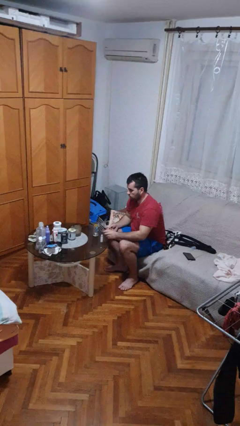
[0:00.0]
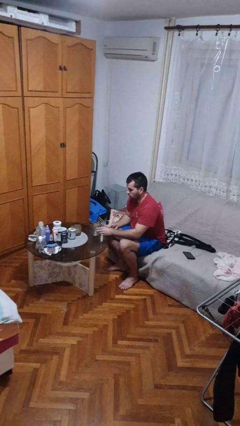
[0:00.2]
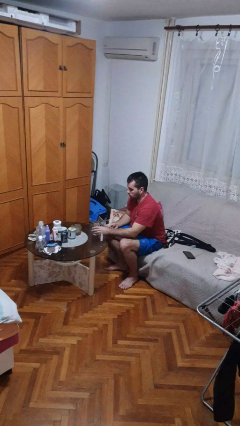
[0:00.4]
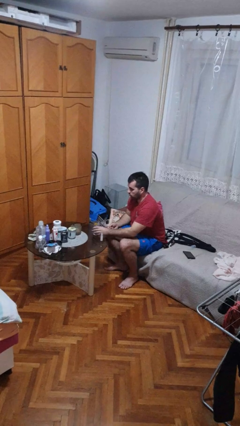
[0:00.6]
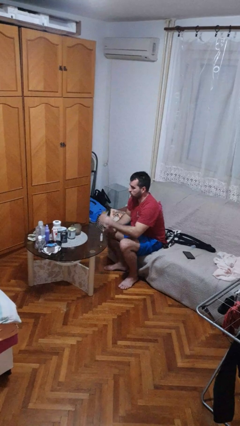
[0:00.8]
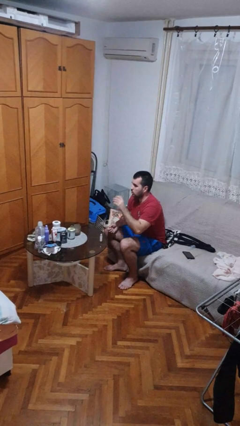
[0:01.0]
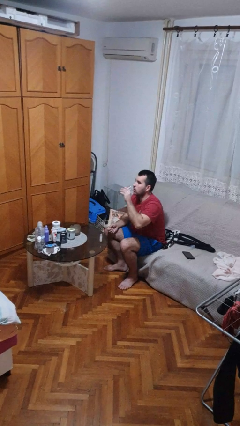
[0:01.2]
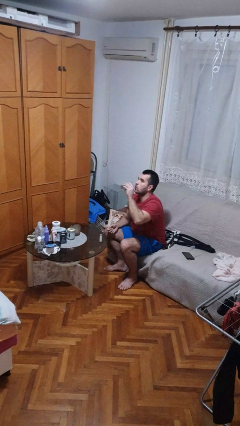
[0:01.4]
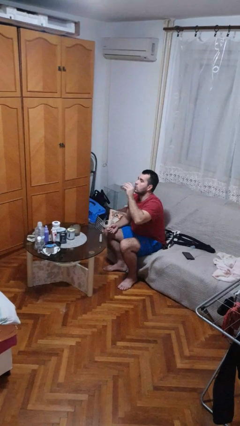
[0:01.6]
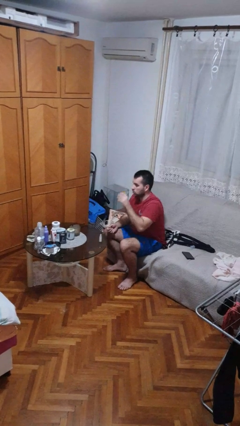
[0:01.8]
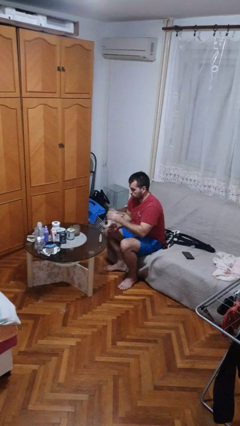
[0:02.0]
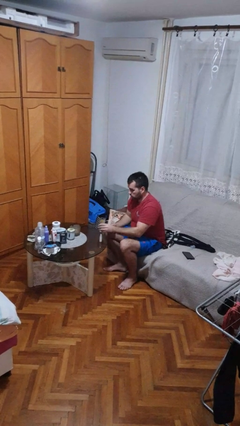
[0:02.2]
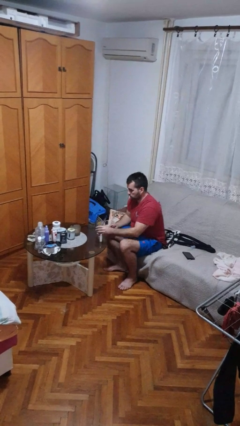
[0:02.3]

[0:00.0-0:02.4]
person drinks from cup

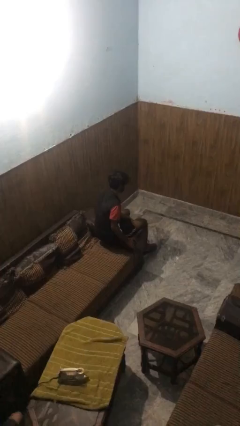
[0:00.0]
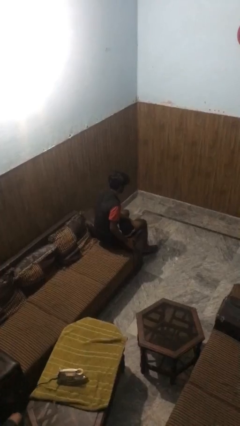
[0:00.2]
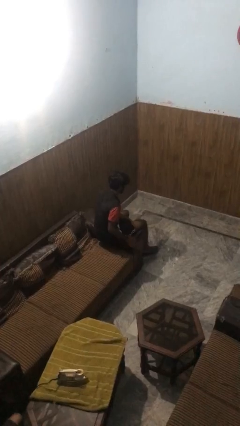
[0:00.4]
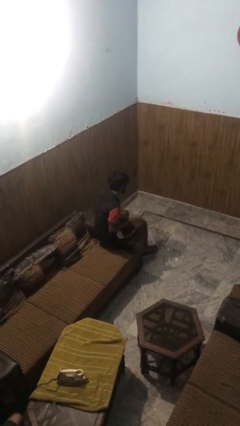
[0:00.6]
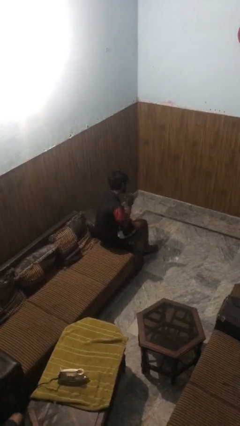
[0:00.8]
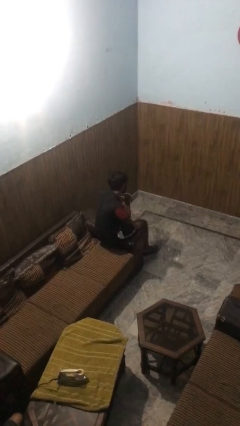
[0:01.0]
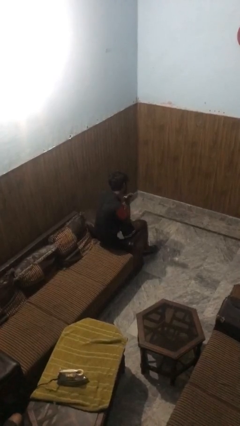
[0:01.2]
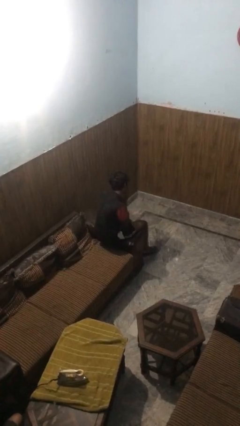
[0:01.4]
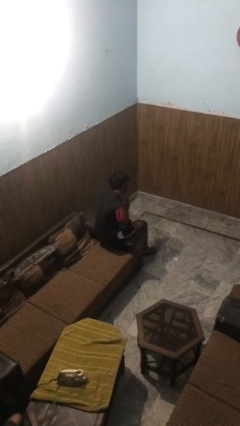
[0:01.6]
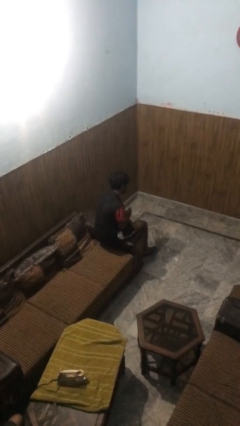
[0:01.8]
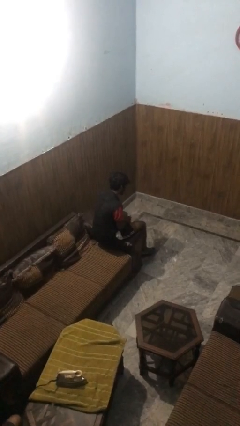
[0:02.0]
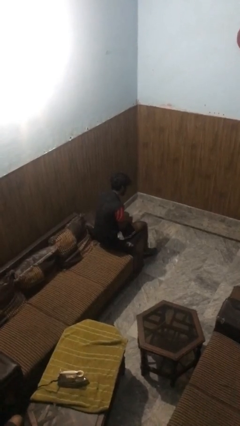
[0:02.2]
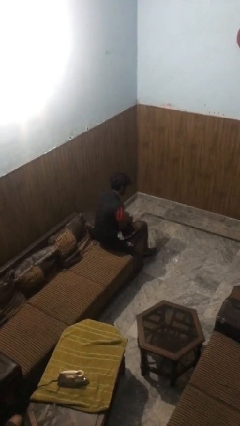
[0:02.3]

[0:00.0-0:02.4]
person swats bug

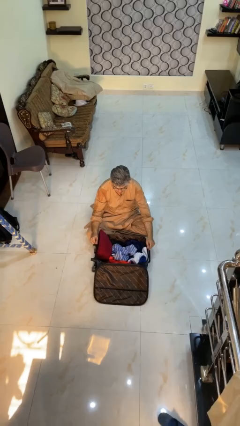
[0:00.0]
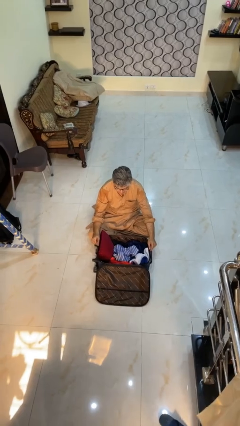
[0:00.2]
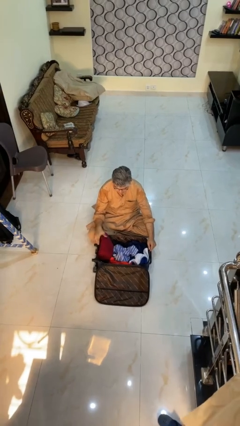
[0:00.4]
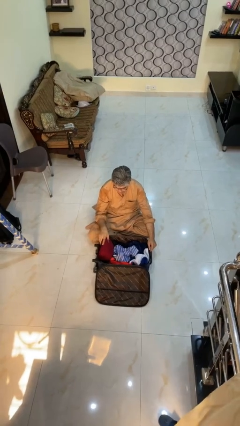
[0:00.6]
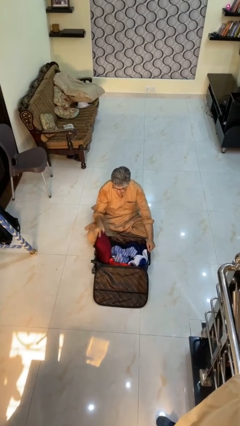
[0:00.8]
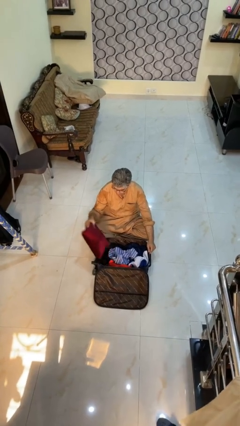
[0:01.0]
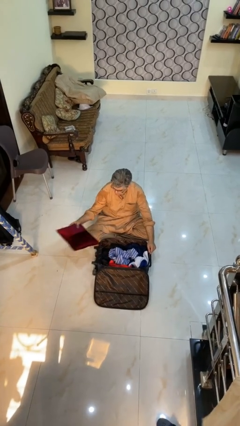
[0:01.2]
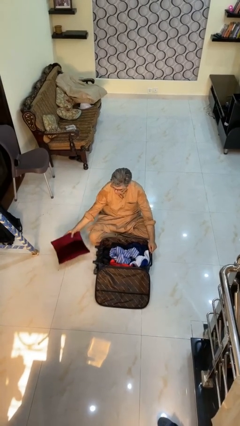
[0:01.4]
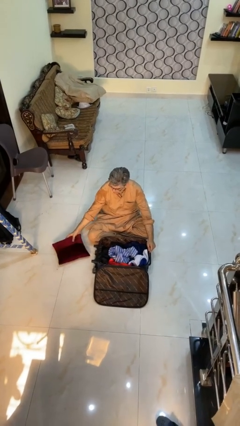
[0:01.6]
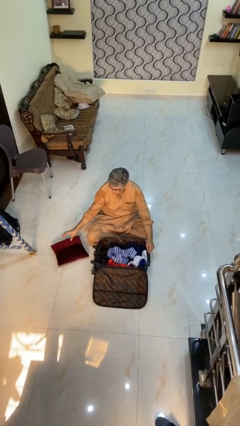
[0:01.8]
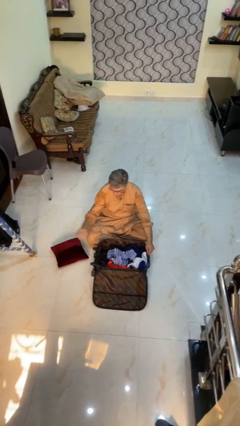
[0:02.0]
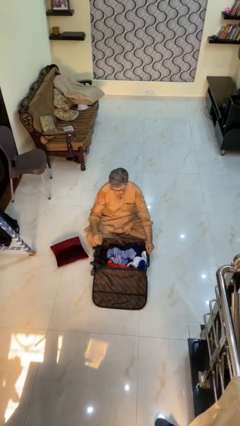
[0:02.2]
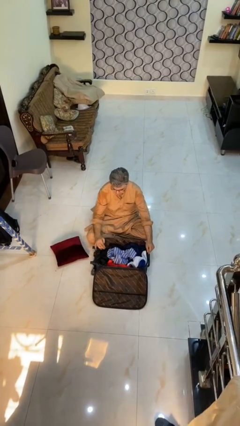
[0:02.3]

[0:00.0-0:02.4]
person unloads clothes from suitcase

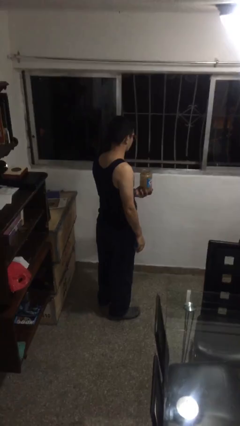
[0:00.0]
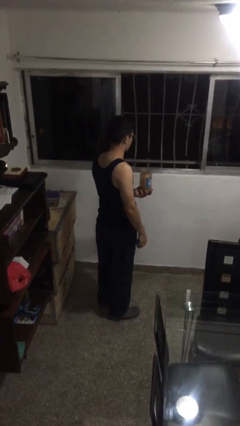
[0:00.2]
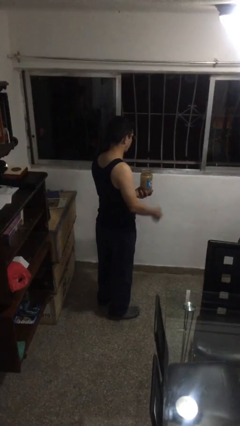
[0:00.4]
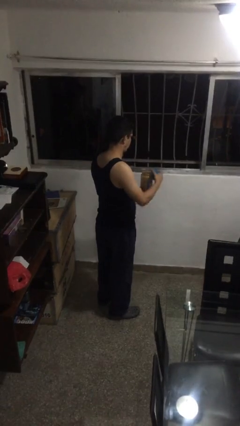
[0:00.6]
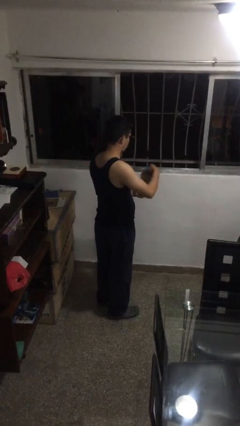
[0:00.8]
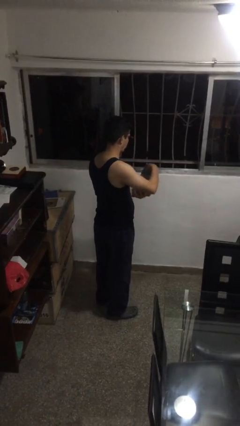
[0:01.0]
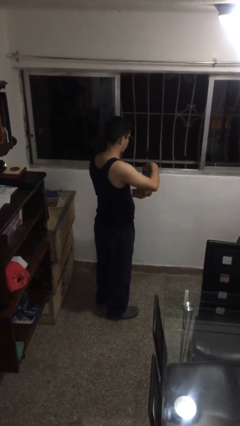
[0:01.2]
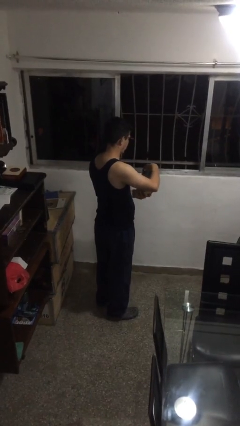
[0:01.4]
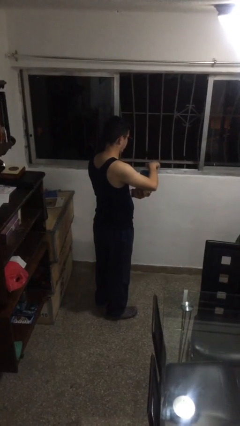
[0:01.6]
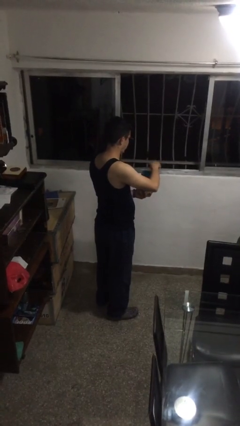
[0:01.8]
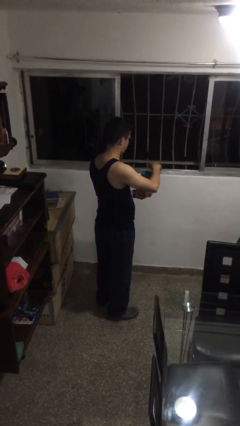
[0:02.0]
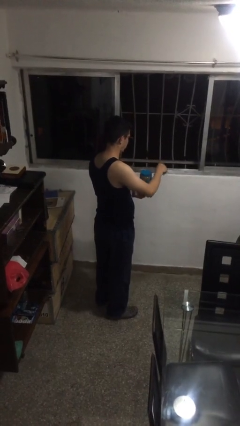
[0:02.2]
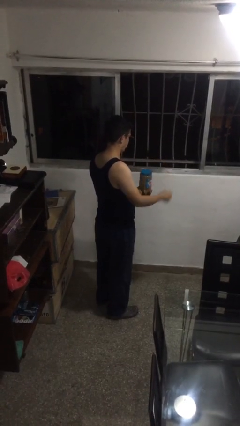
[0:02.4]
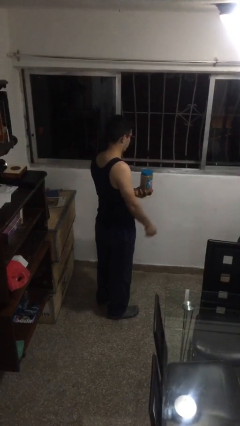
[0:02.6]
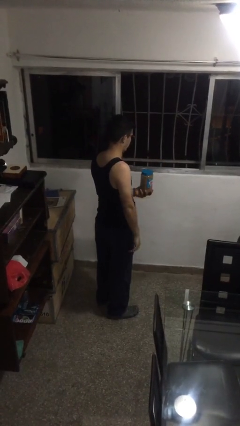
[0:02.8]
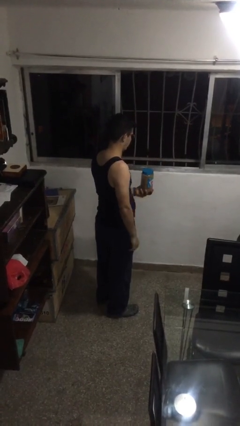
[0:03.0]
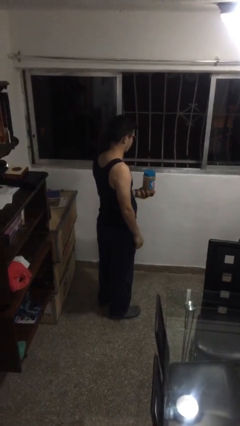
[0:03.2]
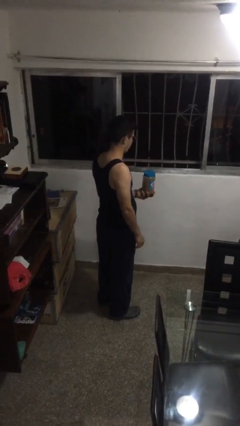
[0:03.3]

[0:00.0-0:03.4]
person closes jar

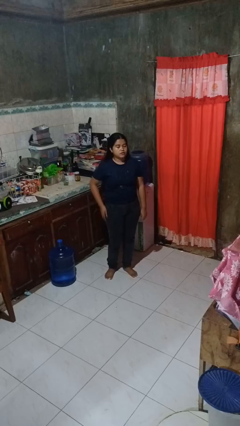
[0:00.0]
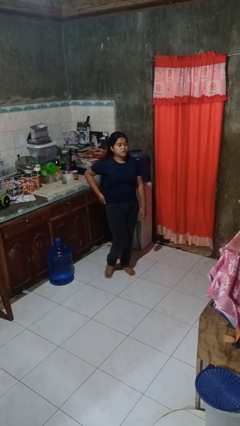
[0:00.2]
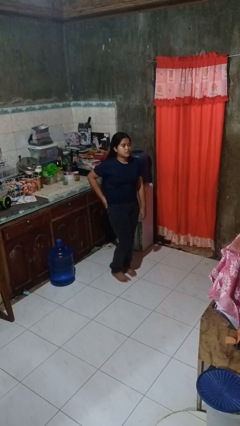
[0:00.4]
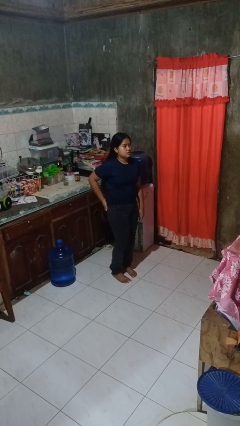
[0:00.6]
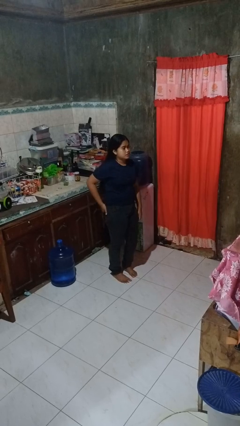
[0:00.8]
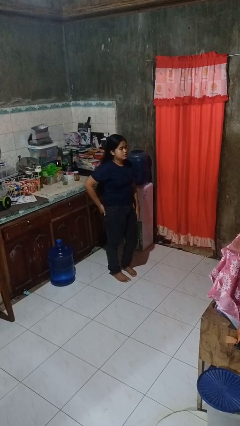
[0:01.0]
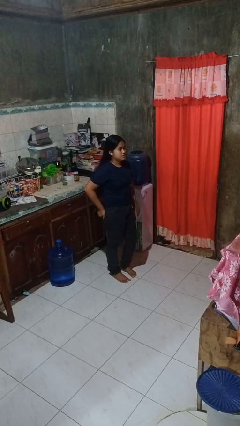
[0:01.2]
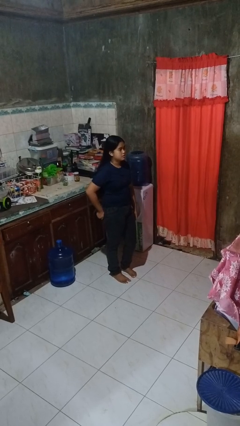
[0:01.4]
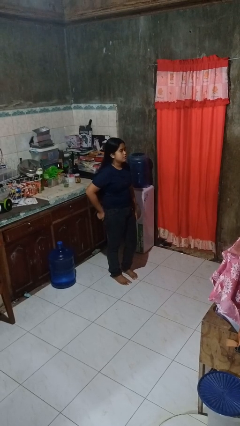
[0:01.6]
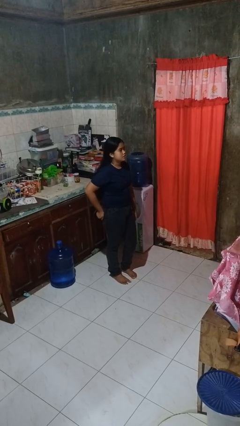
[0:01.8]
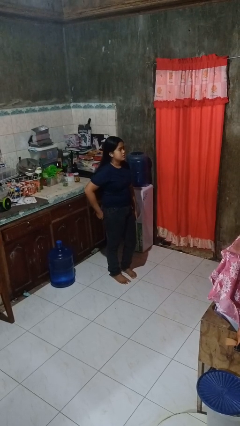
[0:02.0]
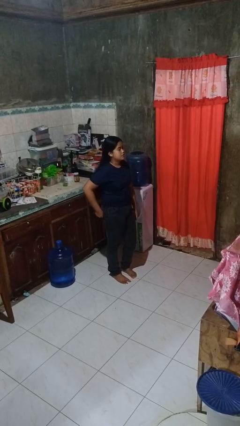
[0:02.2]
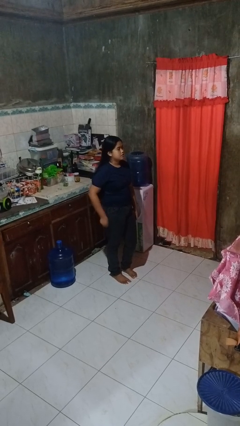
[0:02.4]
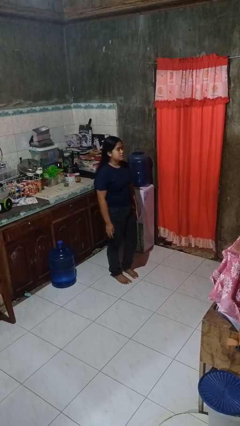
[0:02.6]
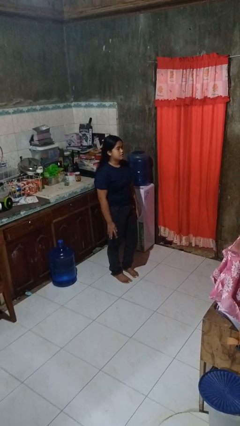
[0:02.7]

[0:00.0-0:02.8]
person puts hands in back pockets

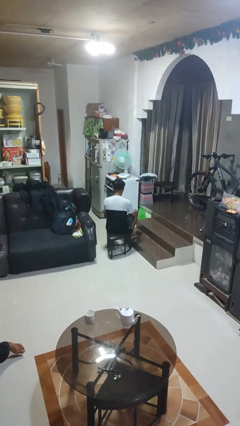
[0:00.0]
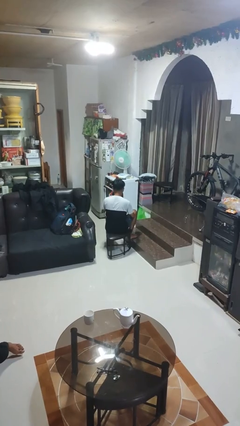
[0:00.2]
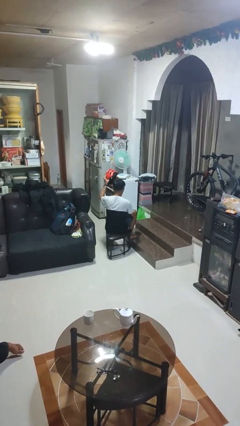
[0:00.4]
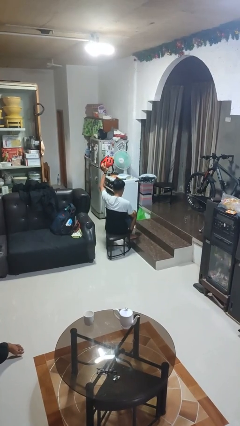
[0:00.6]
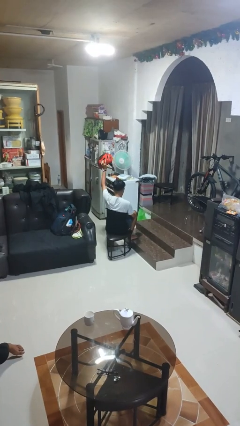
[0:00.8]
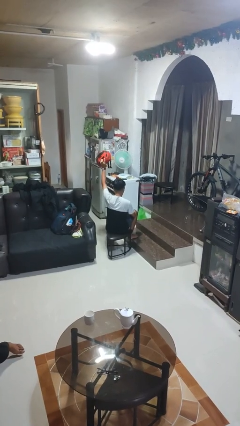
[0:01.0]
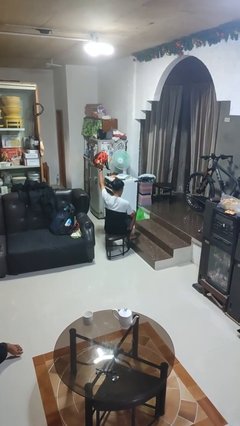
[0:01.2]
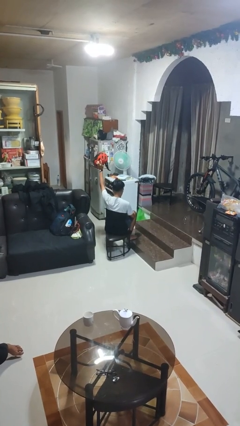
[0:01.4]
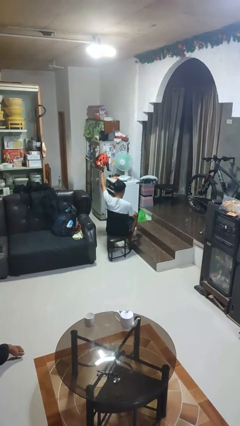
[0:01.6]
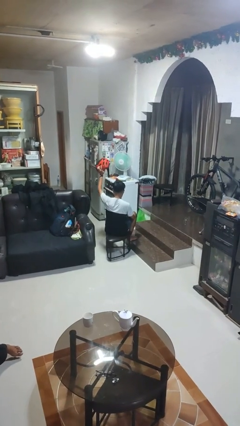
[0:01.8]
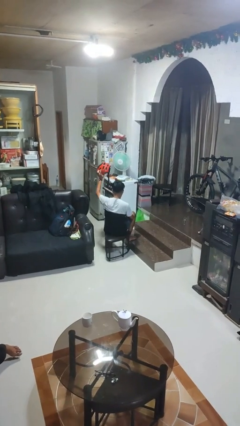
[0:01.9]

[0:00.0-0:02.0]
person holds object above head

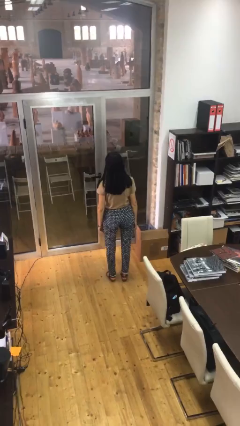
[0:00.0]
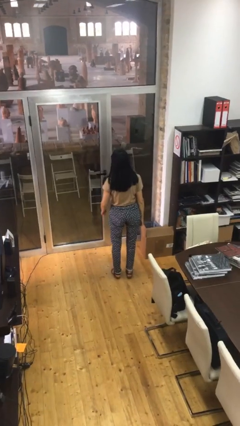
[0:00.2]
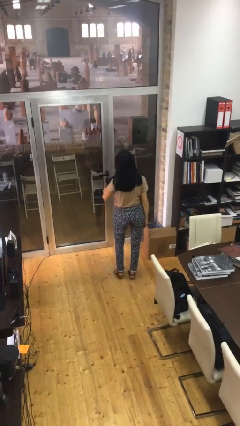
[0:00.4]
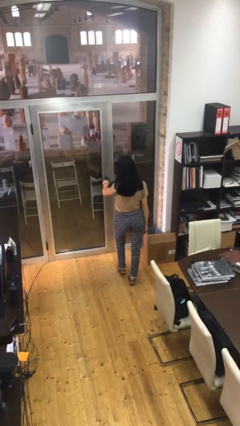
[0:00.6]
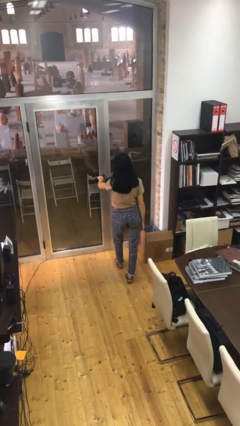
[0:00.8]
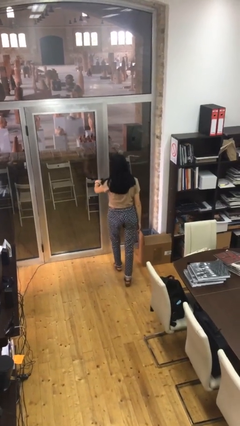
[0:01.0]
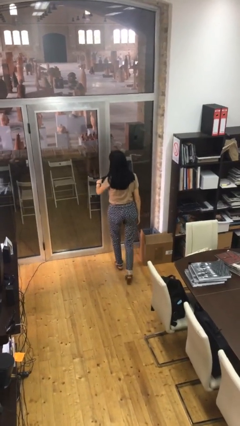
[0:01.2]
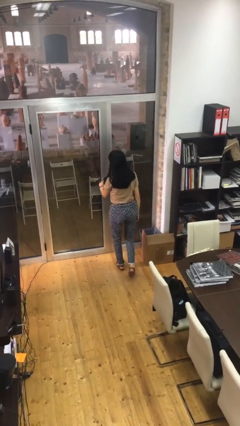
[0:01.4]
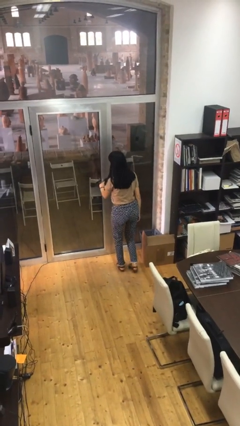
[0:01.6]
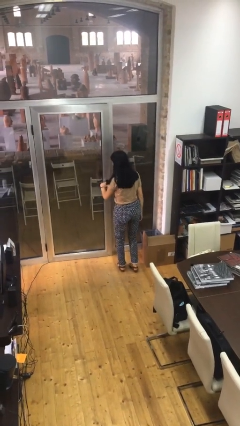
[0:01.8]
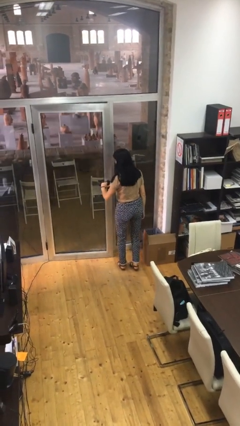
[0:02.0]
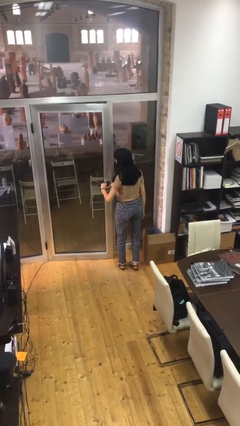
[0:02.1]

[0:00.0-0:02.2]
person opens facility door
